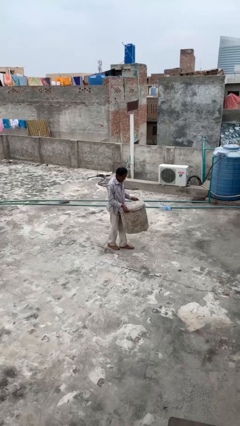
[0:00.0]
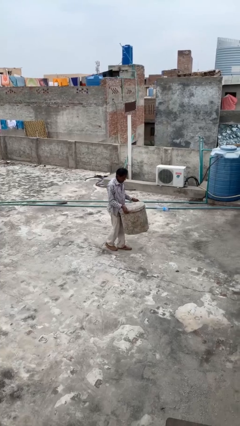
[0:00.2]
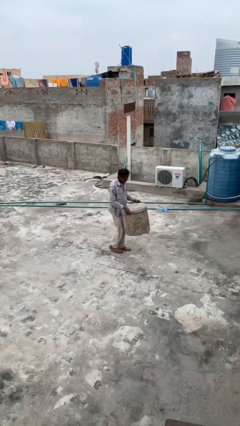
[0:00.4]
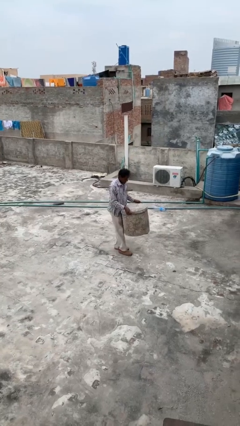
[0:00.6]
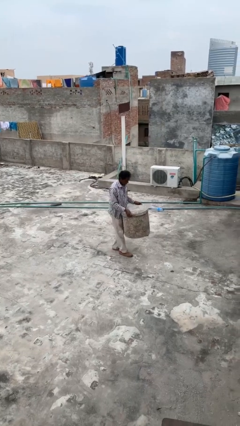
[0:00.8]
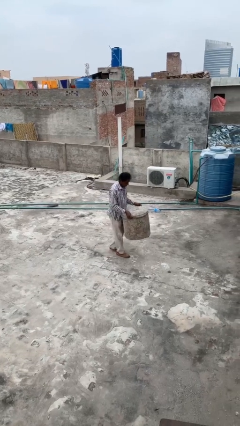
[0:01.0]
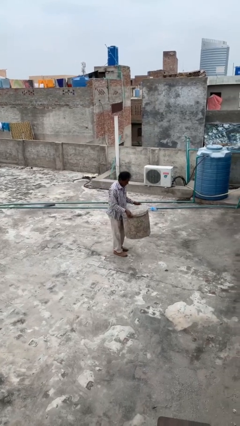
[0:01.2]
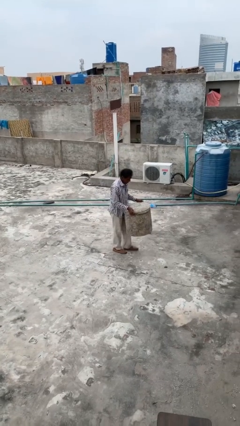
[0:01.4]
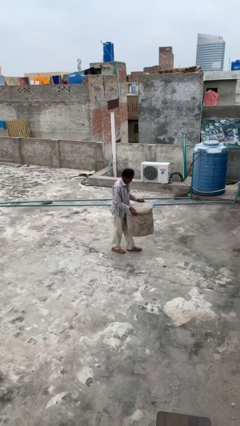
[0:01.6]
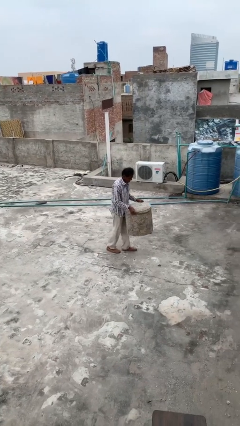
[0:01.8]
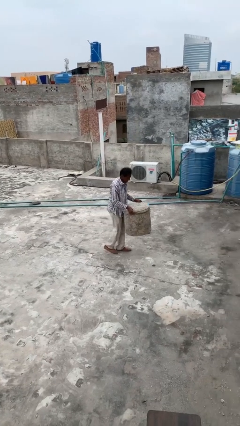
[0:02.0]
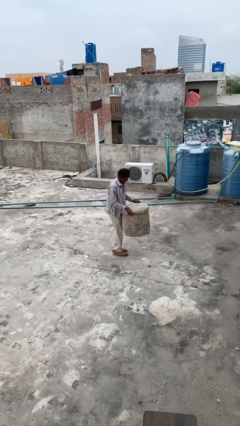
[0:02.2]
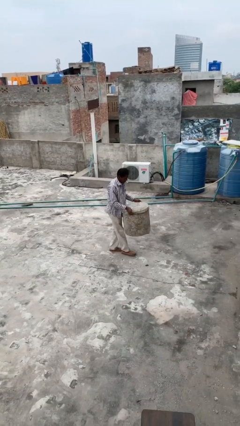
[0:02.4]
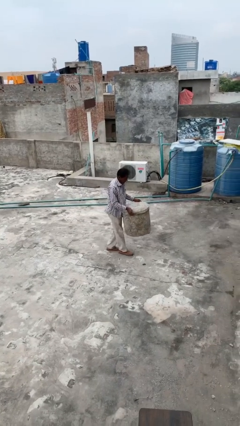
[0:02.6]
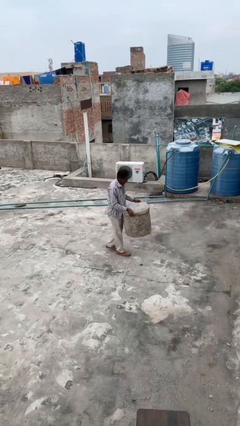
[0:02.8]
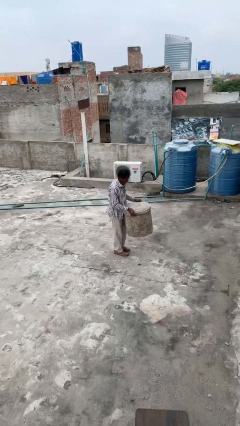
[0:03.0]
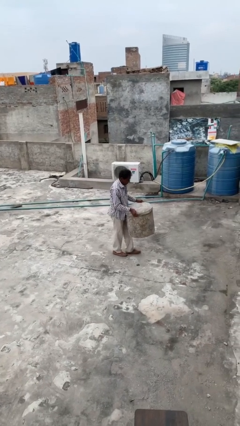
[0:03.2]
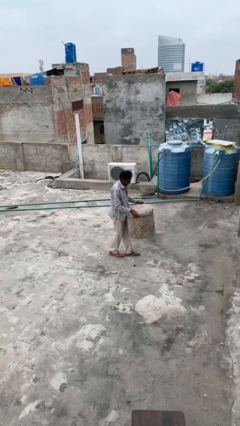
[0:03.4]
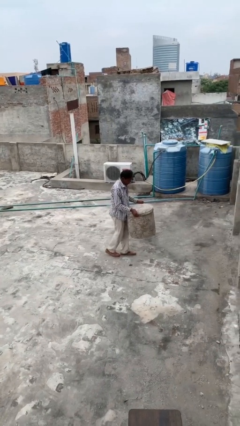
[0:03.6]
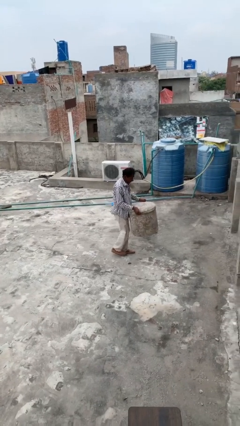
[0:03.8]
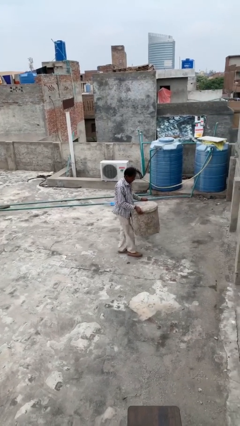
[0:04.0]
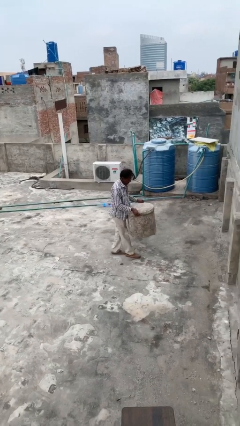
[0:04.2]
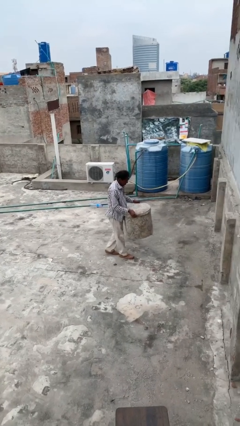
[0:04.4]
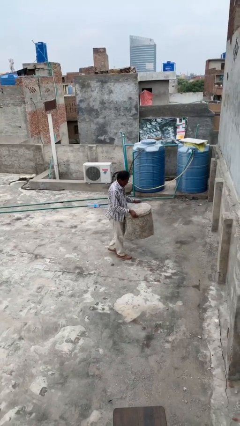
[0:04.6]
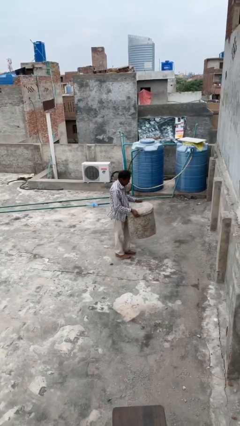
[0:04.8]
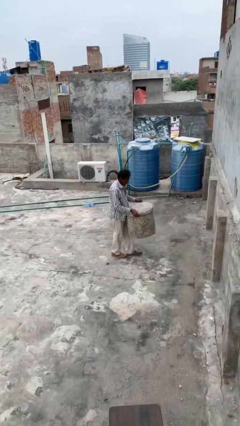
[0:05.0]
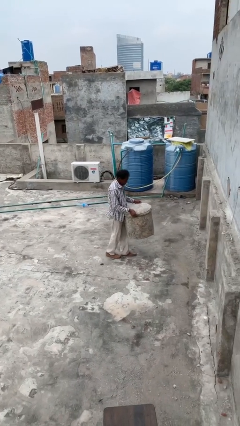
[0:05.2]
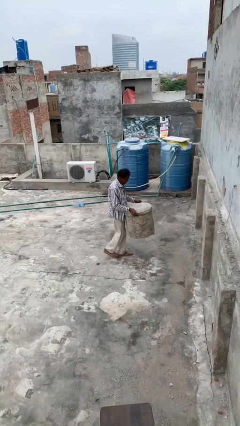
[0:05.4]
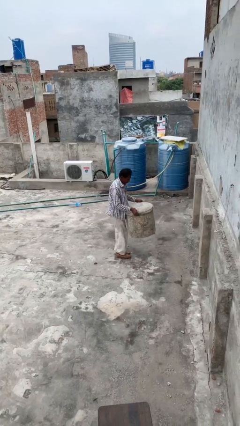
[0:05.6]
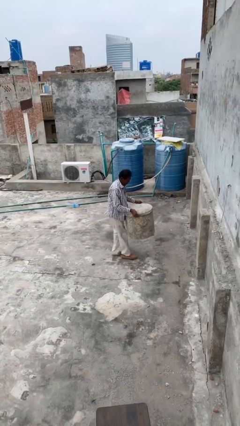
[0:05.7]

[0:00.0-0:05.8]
person carries heavy object

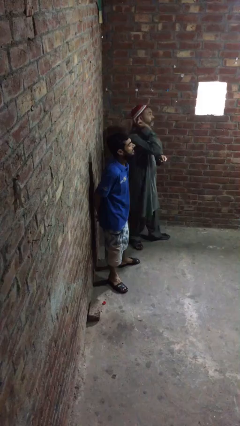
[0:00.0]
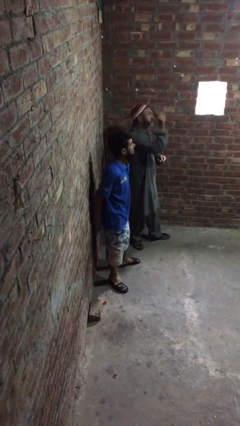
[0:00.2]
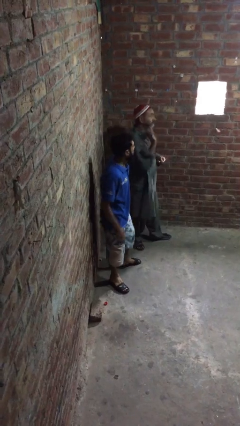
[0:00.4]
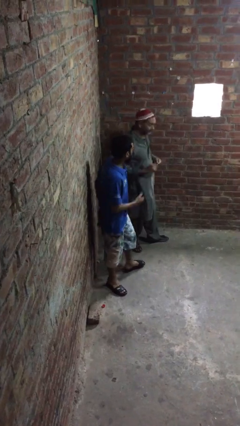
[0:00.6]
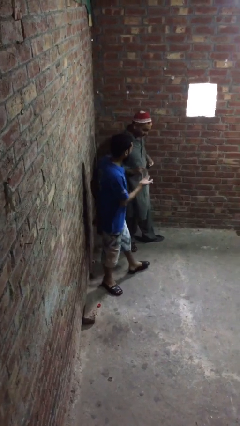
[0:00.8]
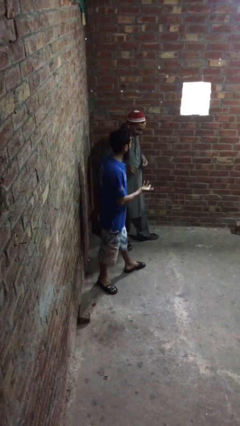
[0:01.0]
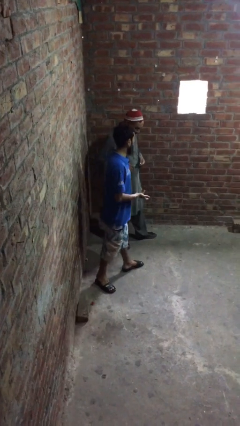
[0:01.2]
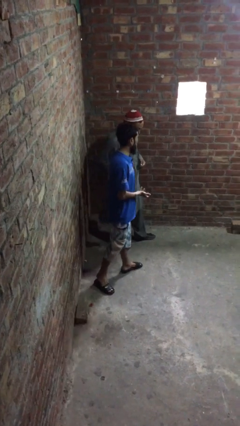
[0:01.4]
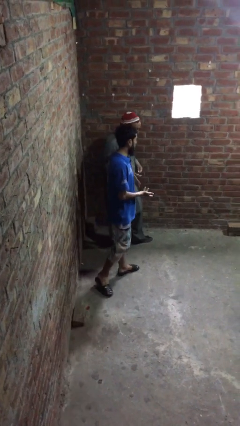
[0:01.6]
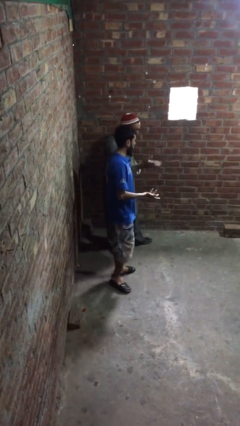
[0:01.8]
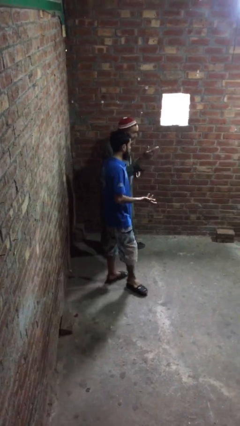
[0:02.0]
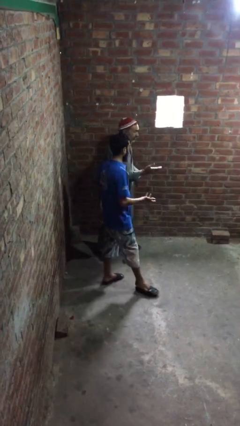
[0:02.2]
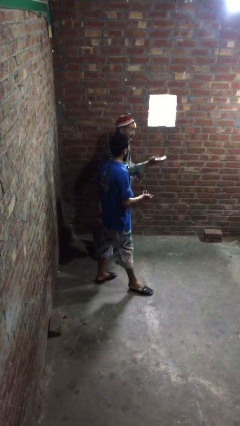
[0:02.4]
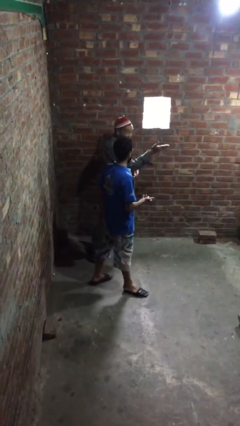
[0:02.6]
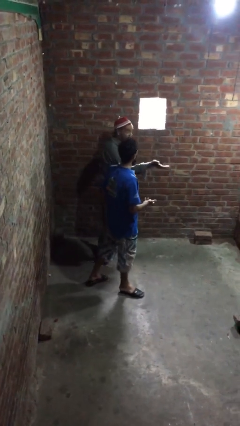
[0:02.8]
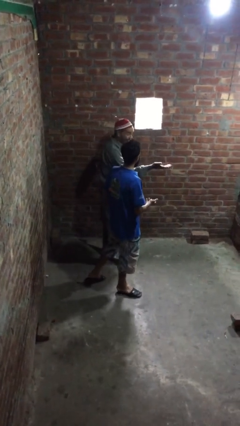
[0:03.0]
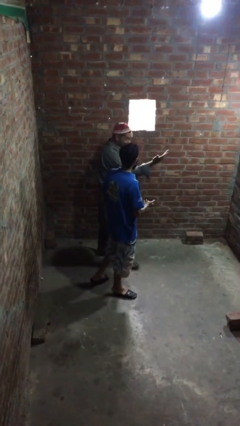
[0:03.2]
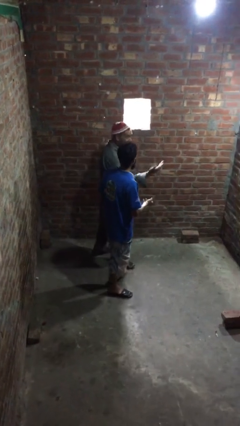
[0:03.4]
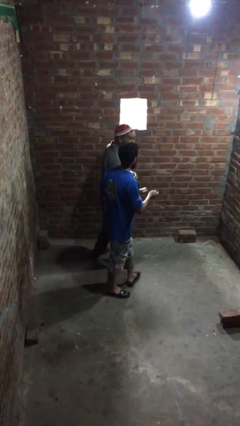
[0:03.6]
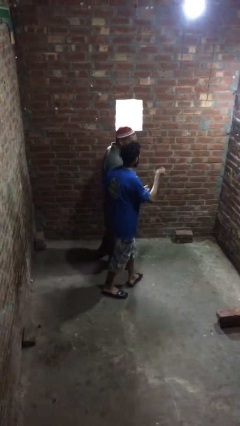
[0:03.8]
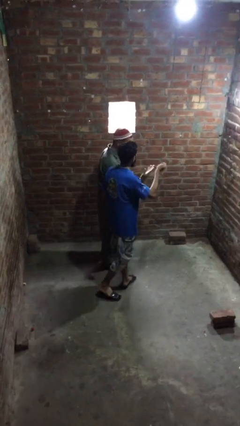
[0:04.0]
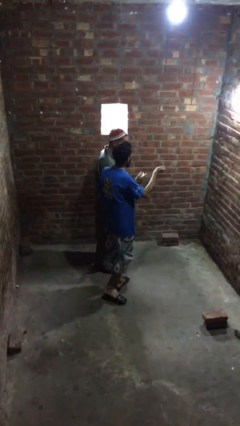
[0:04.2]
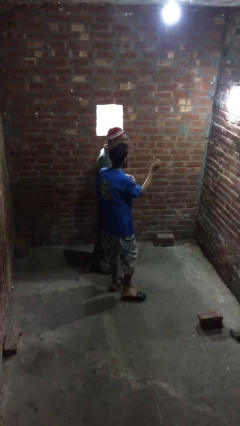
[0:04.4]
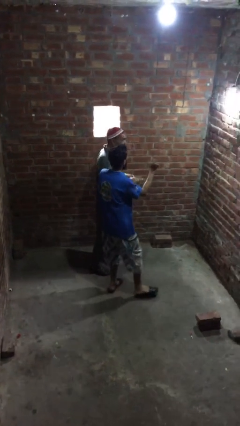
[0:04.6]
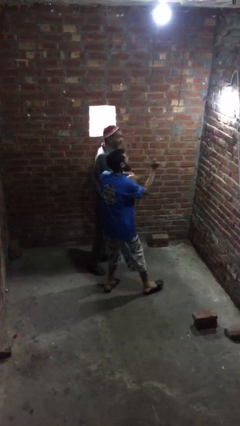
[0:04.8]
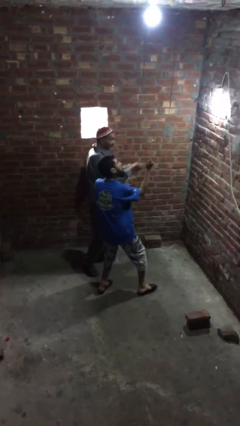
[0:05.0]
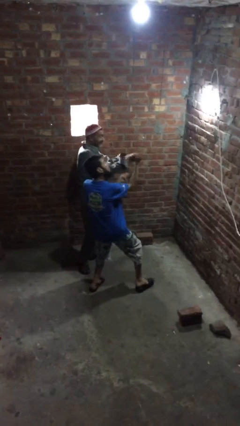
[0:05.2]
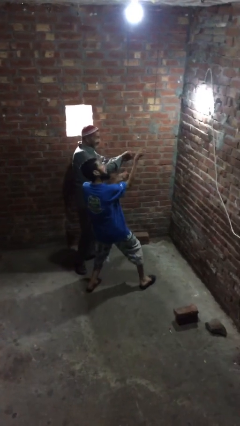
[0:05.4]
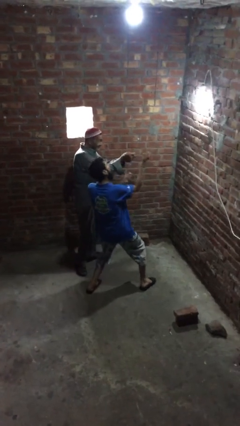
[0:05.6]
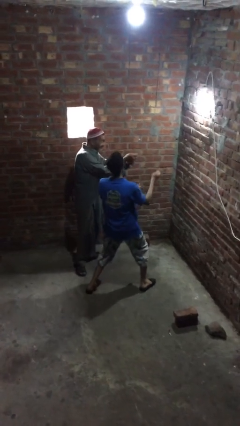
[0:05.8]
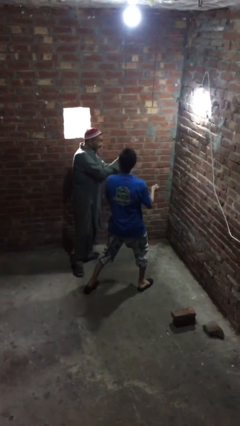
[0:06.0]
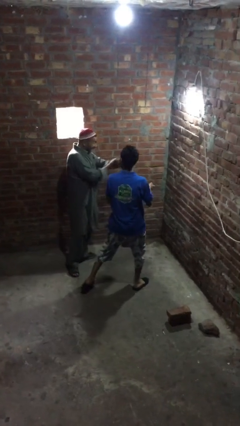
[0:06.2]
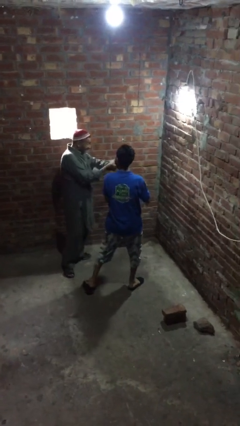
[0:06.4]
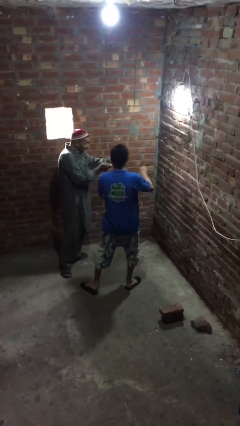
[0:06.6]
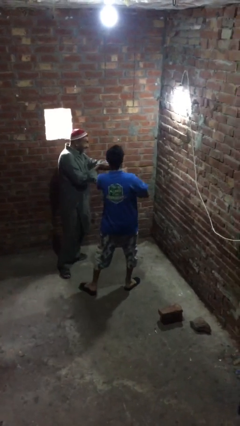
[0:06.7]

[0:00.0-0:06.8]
person talks to person

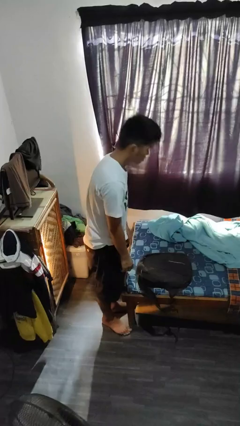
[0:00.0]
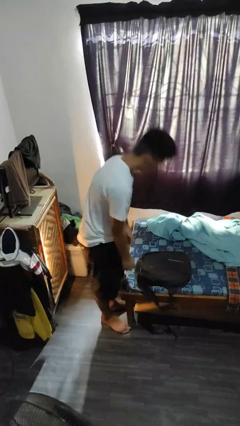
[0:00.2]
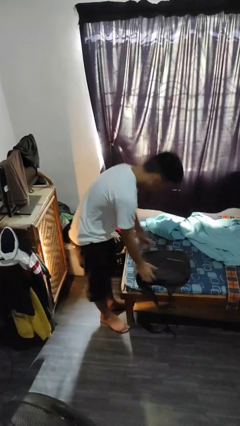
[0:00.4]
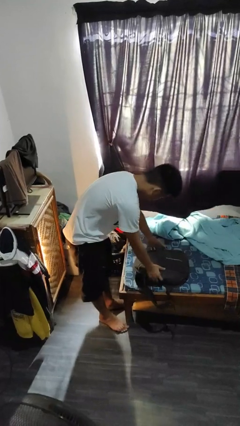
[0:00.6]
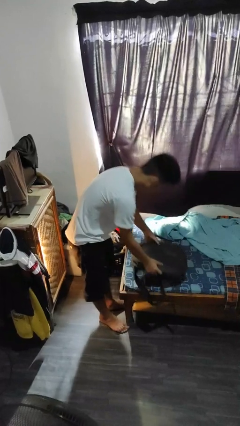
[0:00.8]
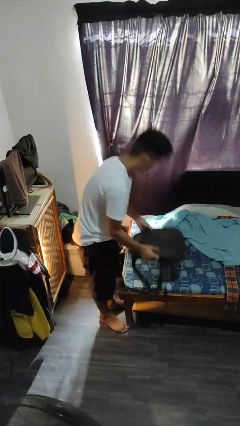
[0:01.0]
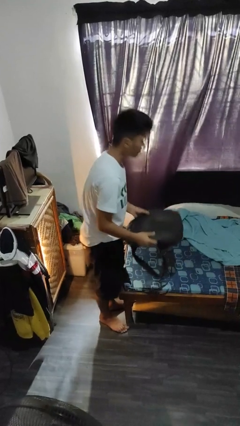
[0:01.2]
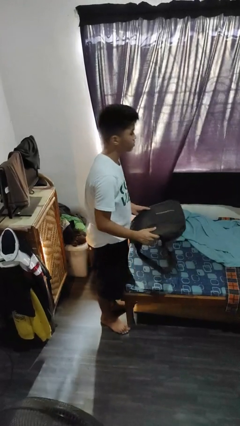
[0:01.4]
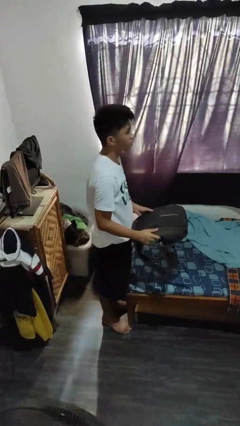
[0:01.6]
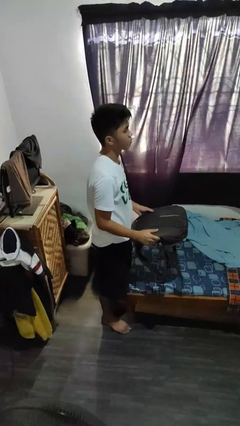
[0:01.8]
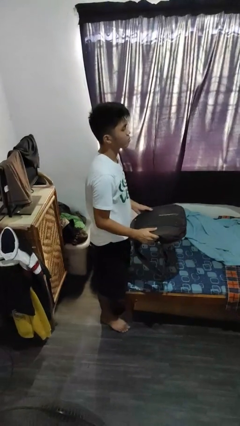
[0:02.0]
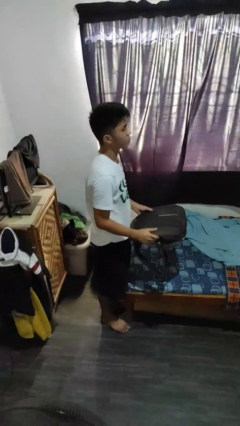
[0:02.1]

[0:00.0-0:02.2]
person picks up object from bed

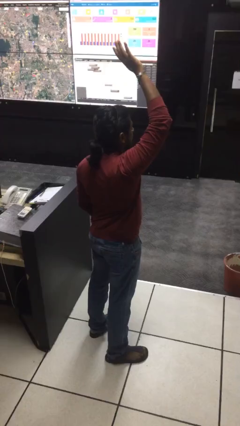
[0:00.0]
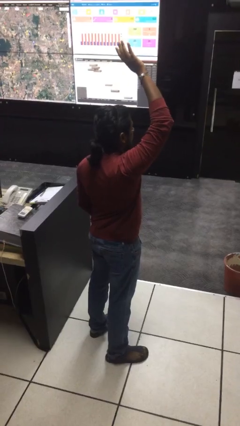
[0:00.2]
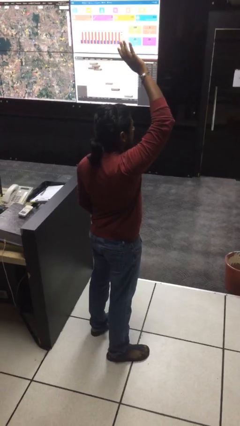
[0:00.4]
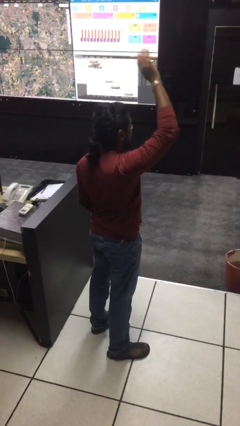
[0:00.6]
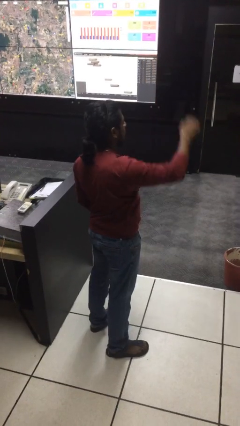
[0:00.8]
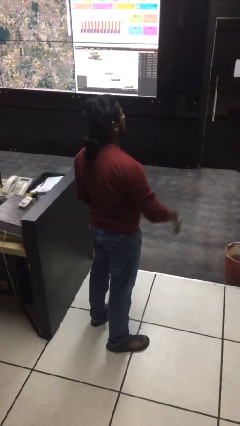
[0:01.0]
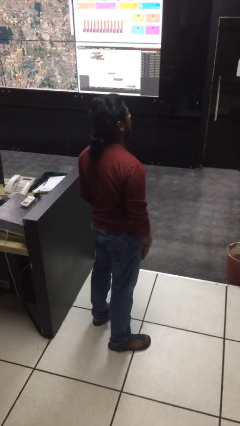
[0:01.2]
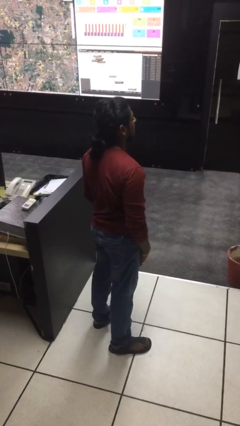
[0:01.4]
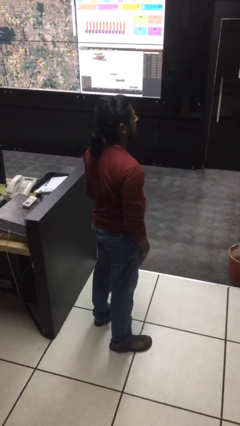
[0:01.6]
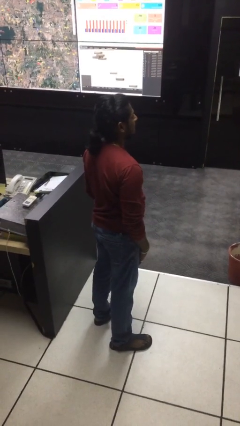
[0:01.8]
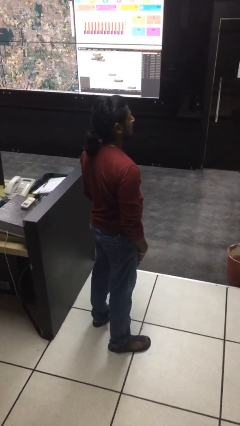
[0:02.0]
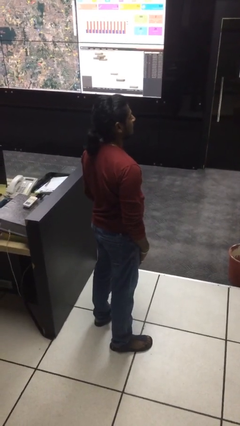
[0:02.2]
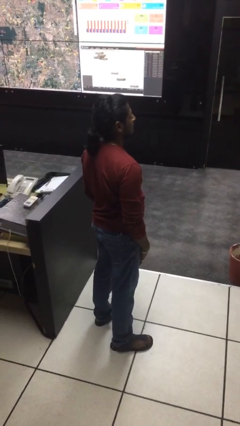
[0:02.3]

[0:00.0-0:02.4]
person gestures lower hand

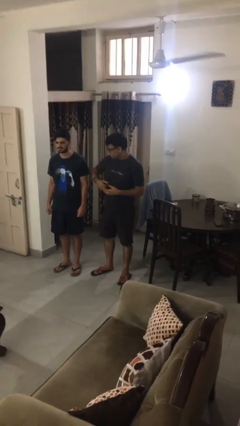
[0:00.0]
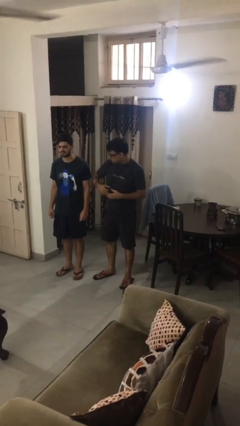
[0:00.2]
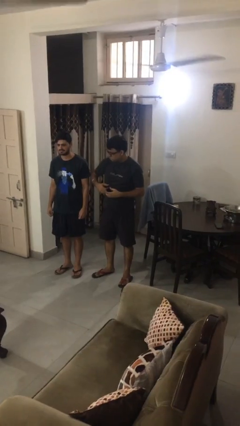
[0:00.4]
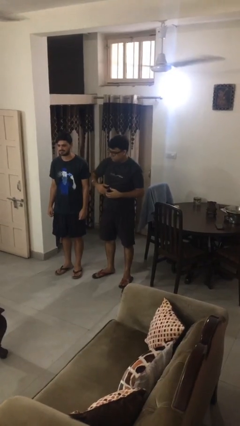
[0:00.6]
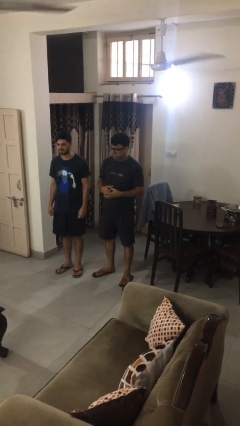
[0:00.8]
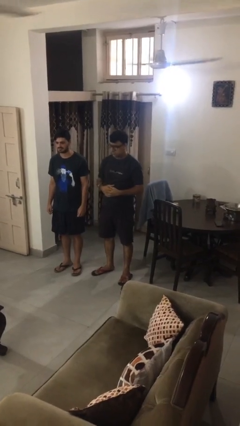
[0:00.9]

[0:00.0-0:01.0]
person nudges person with elbow
